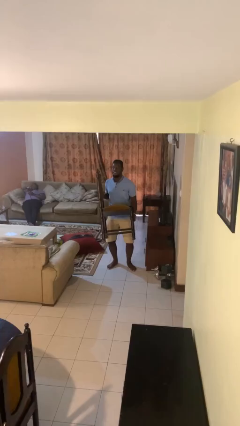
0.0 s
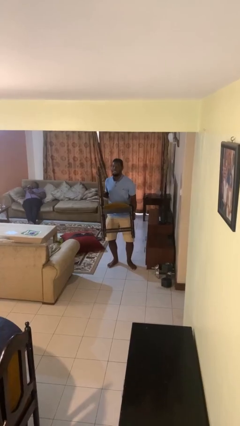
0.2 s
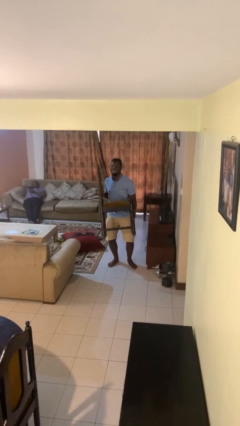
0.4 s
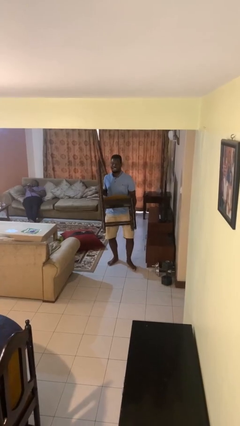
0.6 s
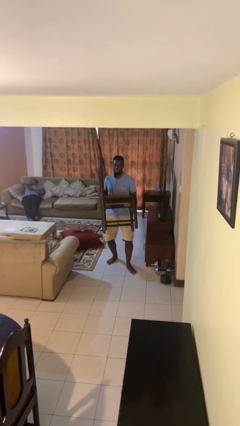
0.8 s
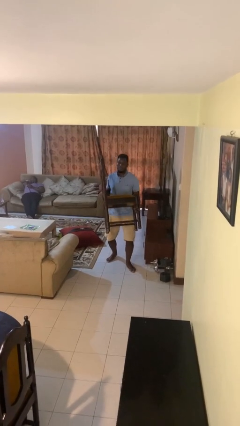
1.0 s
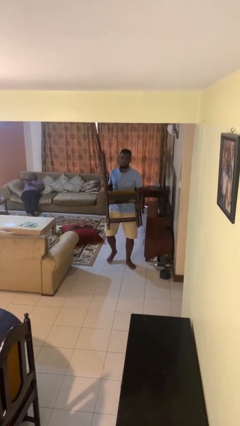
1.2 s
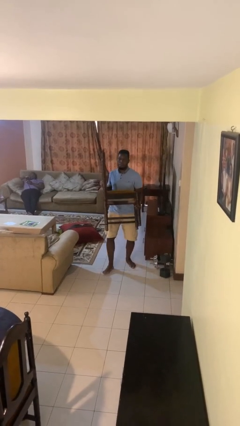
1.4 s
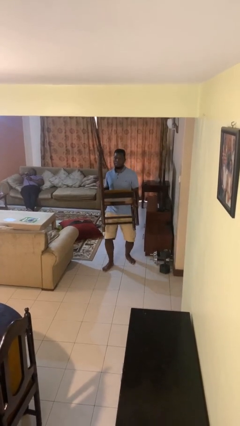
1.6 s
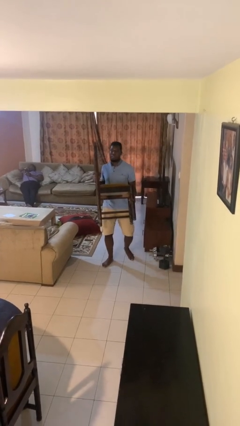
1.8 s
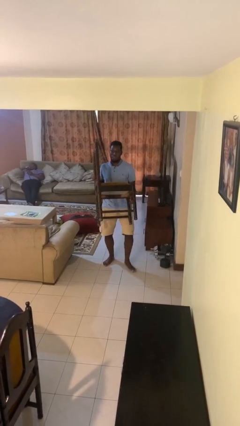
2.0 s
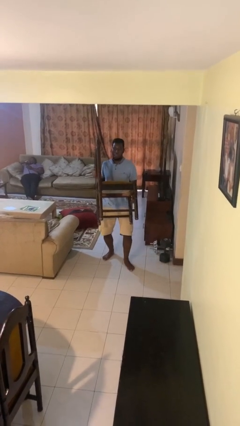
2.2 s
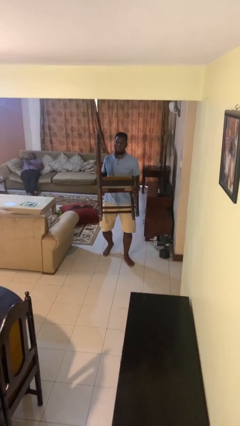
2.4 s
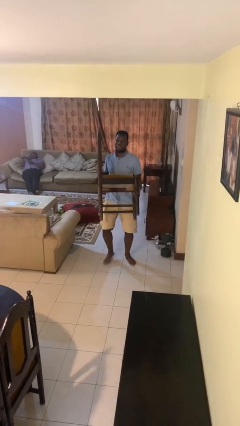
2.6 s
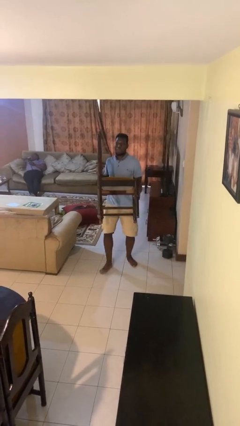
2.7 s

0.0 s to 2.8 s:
person carries heavy object

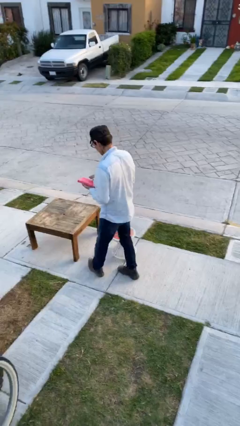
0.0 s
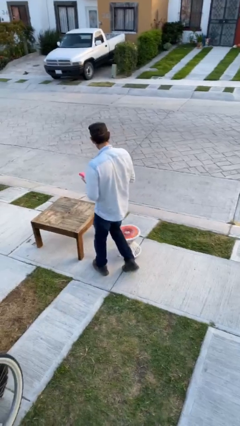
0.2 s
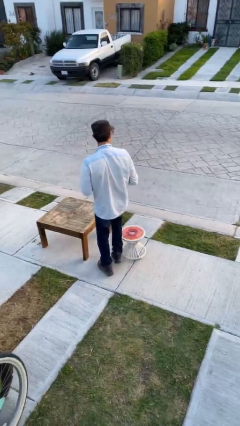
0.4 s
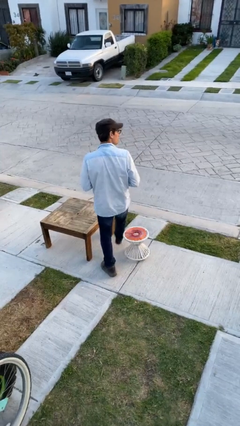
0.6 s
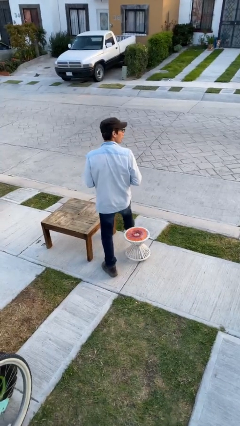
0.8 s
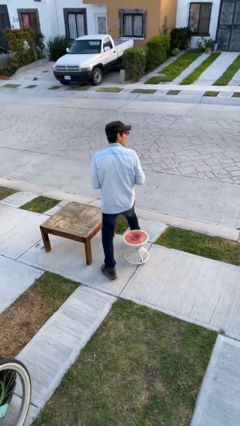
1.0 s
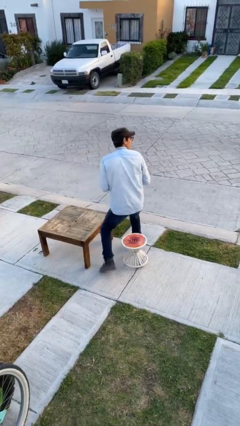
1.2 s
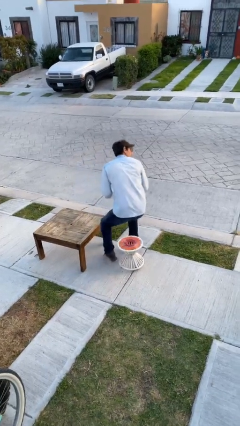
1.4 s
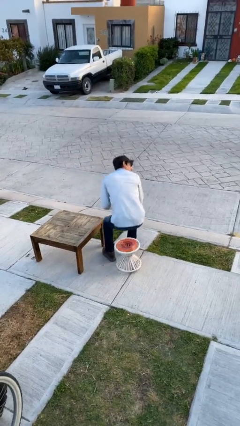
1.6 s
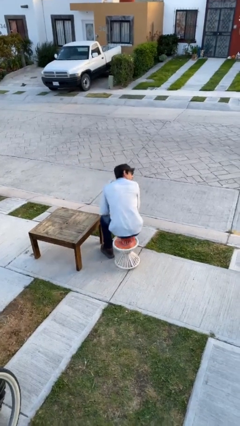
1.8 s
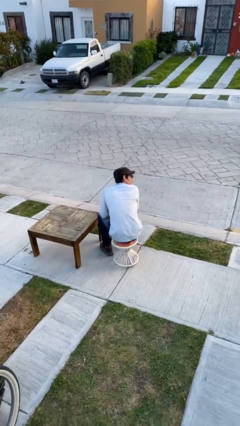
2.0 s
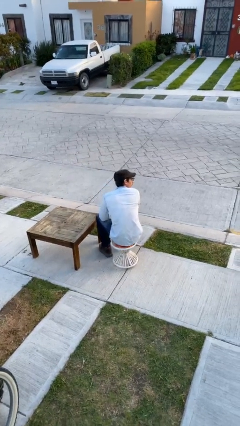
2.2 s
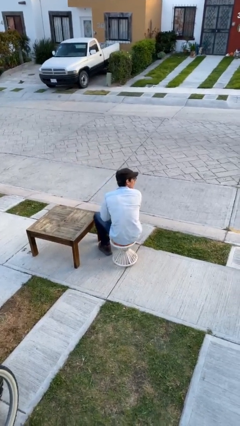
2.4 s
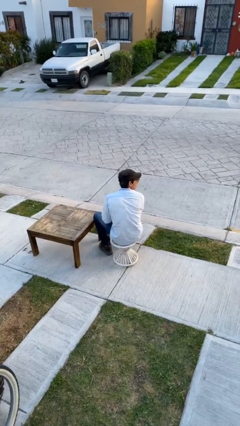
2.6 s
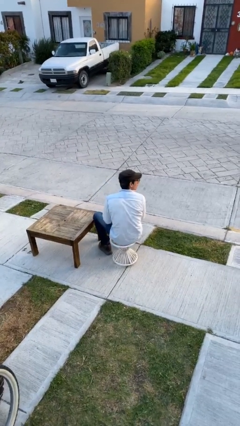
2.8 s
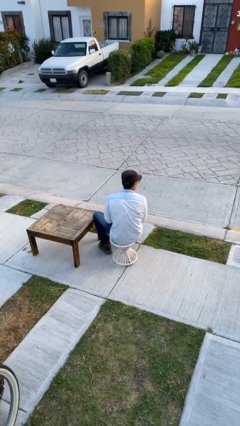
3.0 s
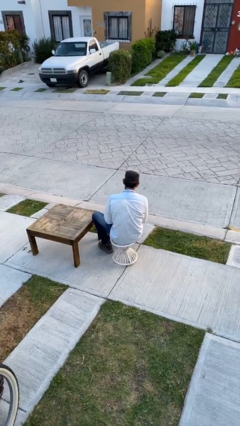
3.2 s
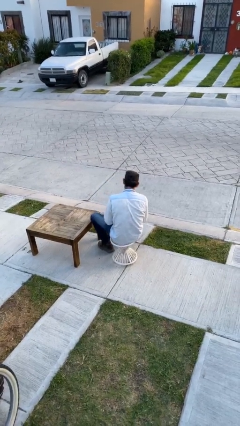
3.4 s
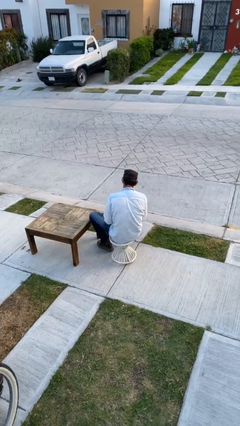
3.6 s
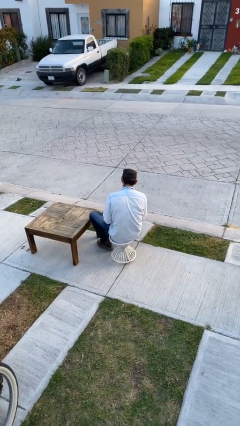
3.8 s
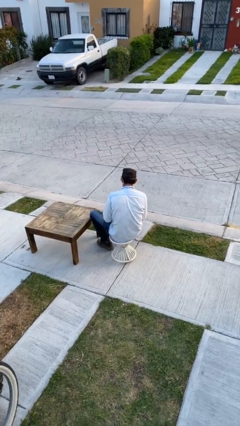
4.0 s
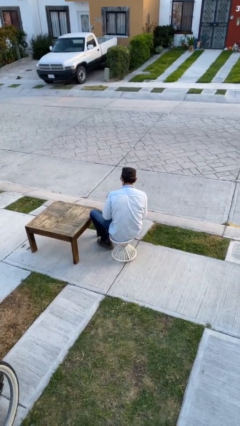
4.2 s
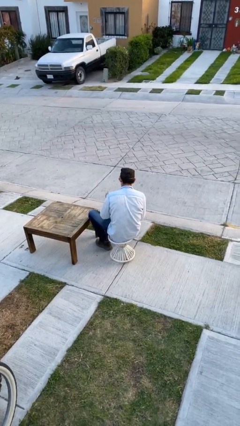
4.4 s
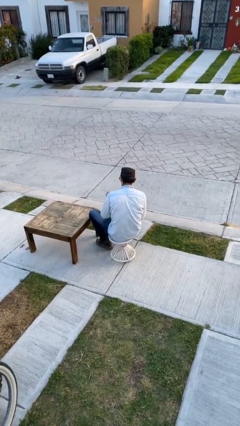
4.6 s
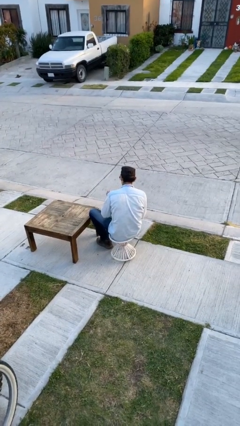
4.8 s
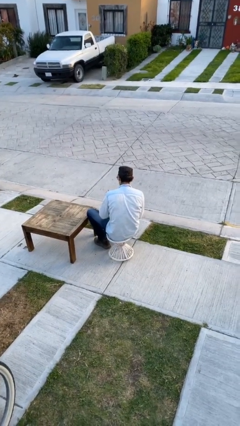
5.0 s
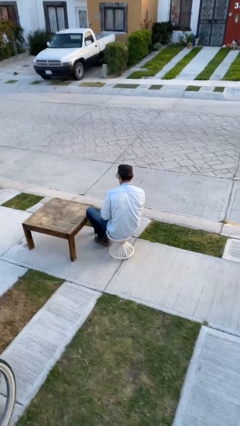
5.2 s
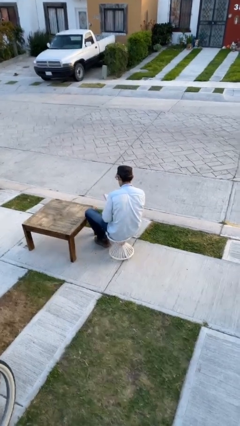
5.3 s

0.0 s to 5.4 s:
person sits down

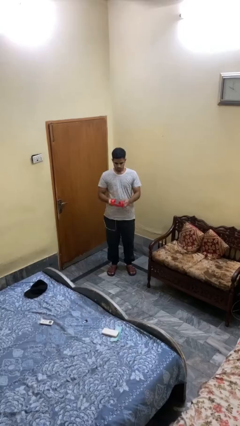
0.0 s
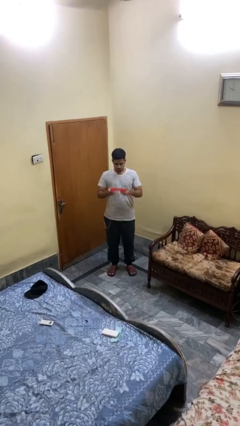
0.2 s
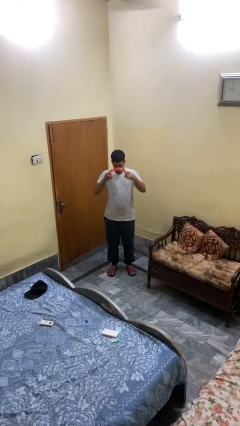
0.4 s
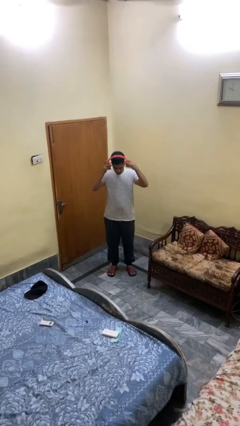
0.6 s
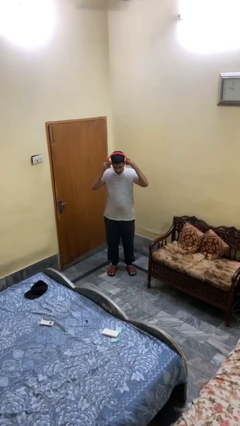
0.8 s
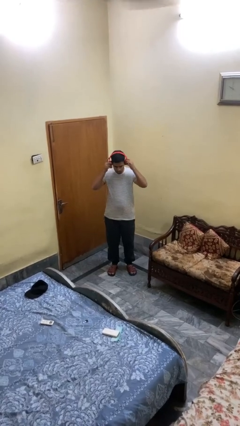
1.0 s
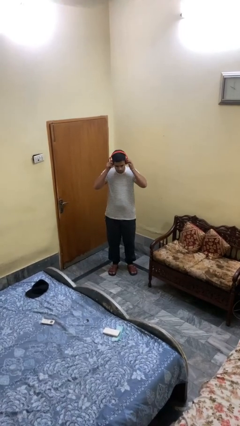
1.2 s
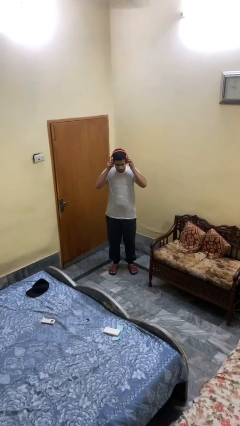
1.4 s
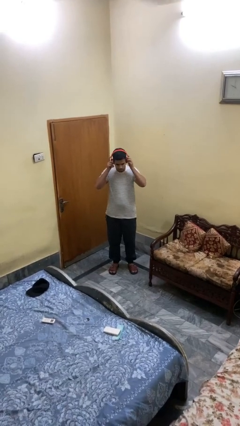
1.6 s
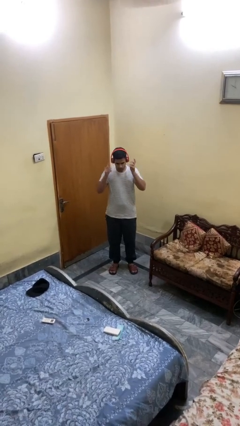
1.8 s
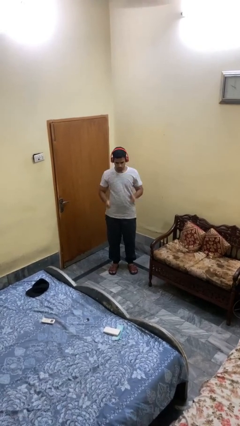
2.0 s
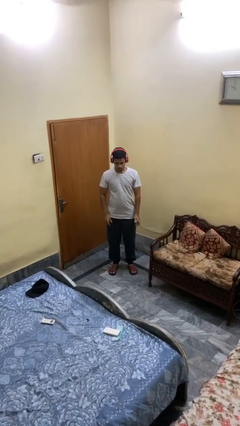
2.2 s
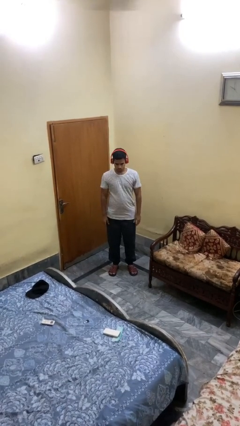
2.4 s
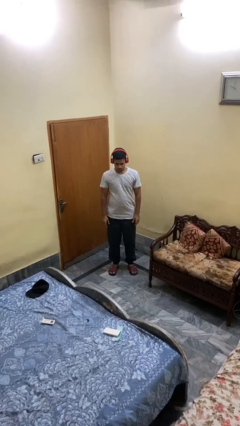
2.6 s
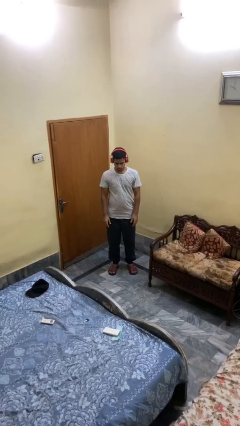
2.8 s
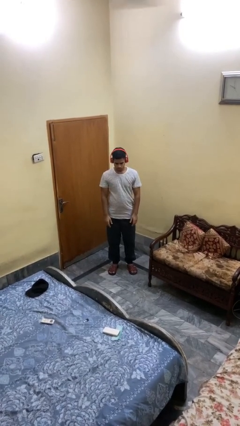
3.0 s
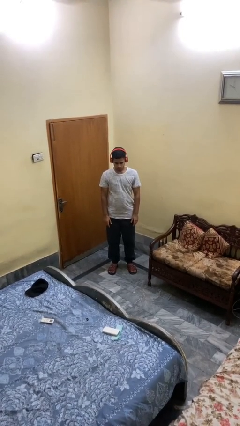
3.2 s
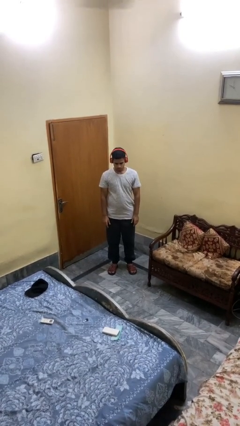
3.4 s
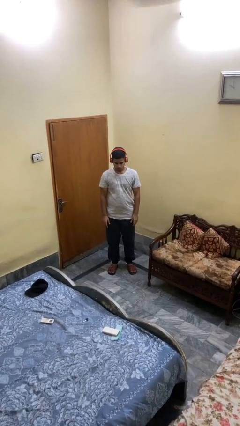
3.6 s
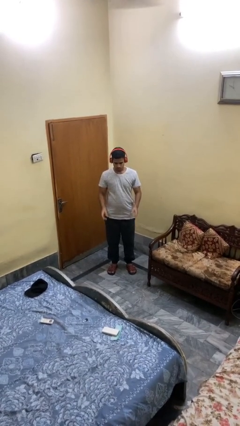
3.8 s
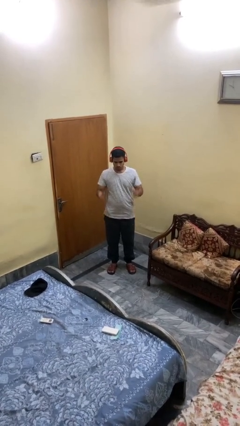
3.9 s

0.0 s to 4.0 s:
person puts on headphones

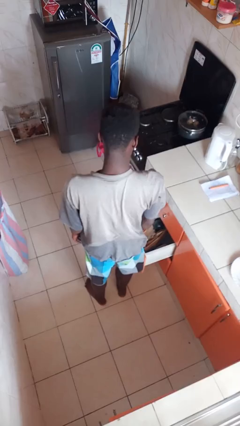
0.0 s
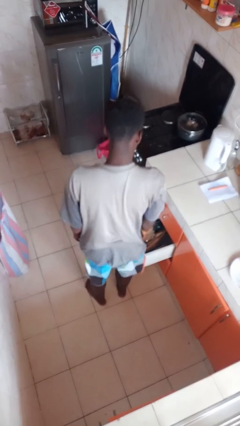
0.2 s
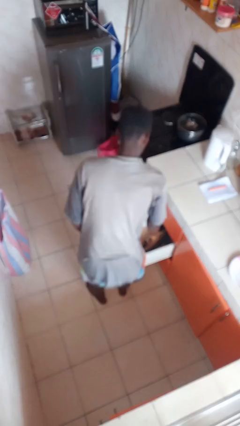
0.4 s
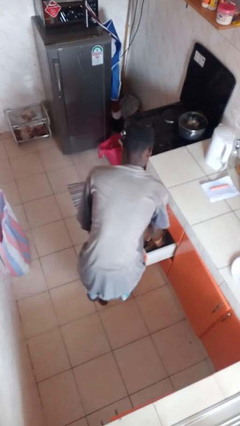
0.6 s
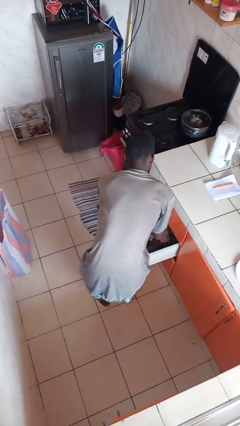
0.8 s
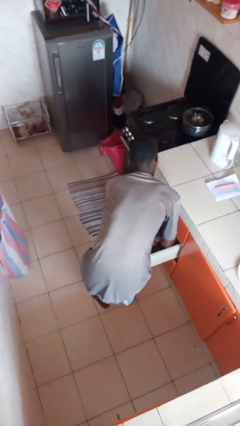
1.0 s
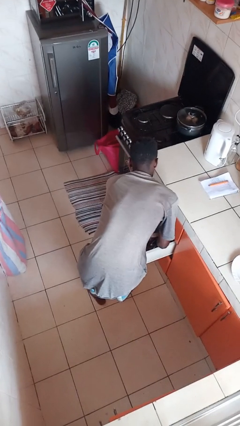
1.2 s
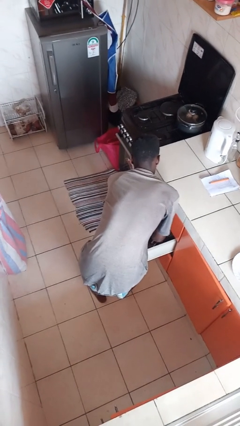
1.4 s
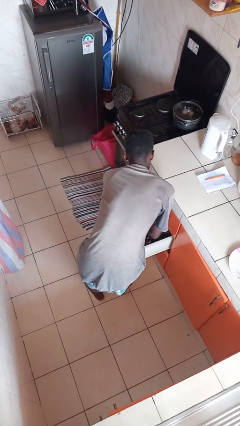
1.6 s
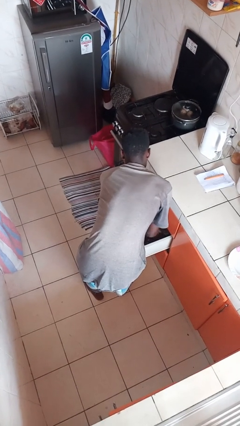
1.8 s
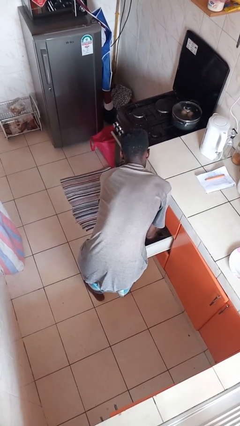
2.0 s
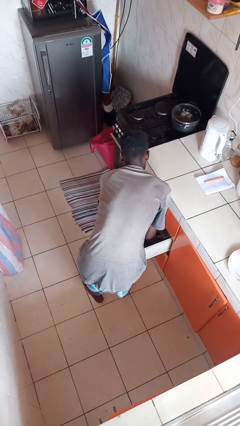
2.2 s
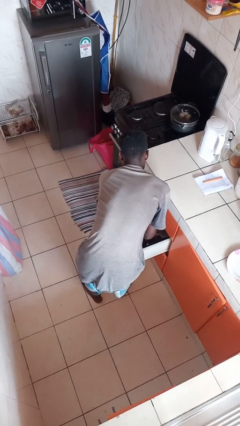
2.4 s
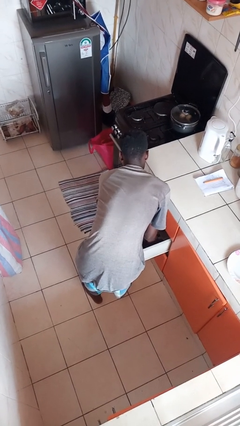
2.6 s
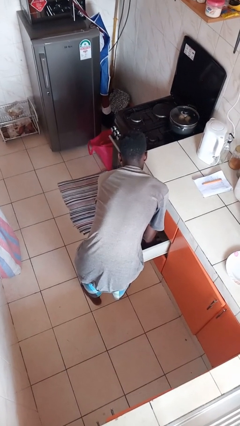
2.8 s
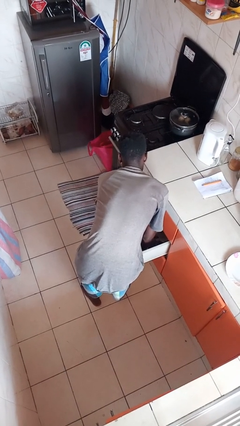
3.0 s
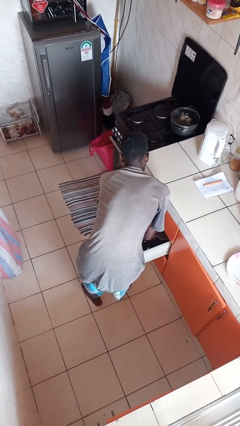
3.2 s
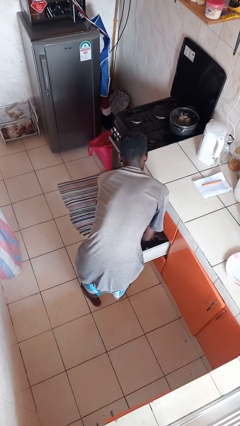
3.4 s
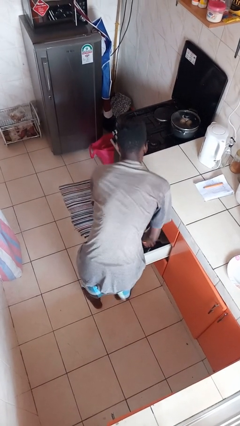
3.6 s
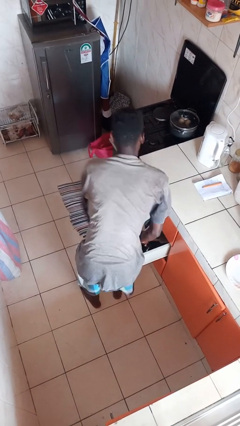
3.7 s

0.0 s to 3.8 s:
person searches in kitchen drawer

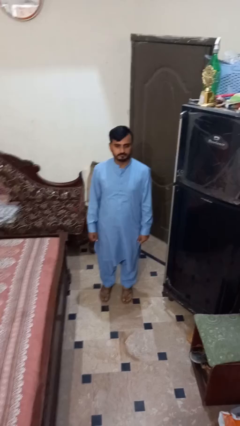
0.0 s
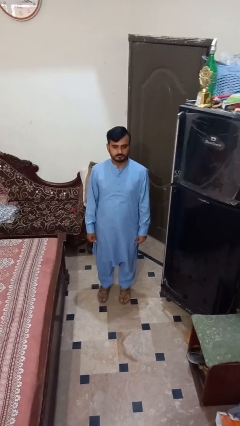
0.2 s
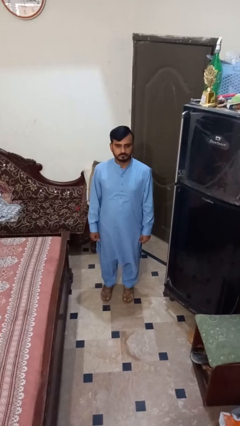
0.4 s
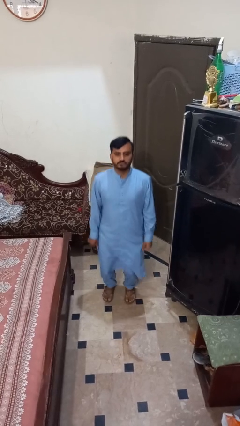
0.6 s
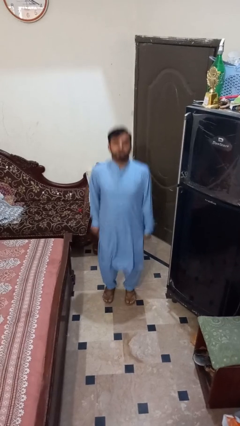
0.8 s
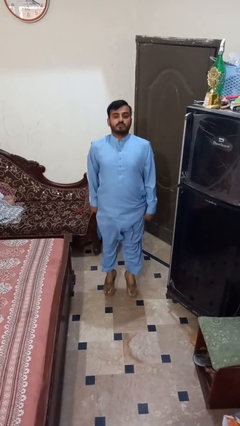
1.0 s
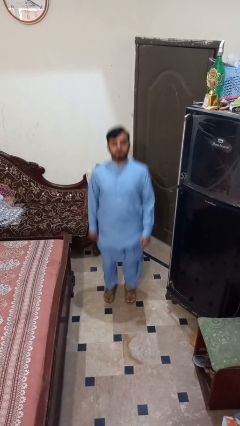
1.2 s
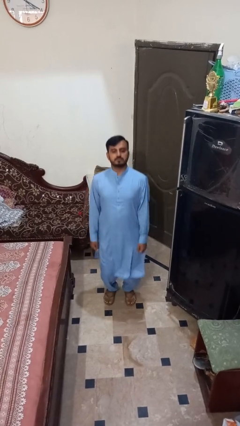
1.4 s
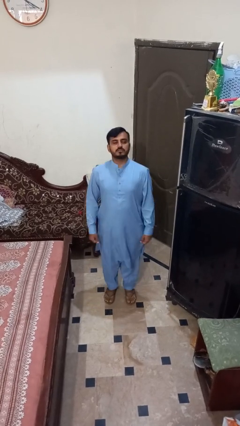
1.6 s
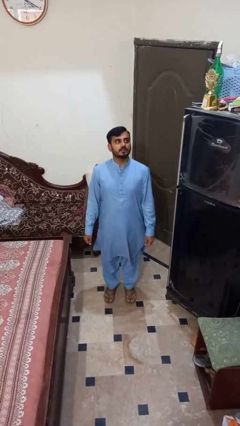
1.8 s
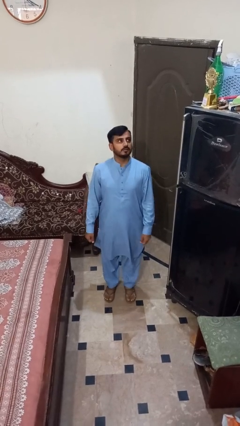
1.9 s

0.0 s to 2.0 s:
person jumps
